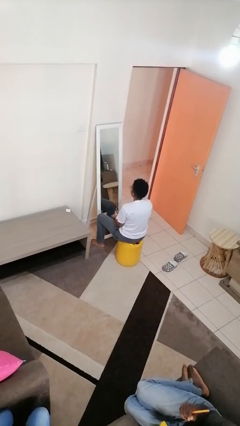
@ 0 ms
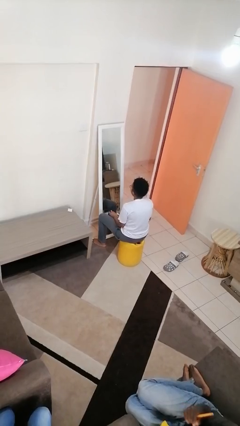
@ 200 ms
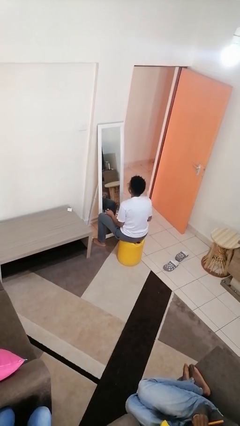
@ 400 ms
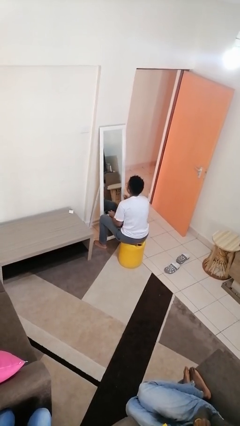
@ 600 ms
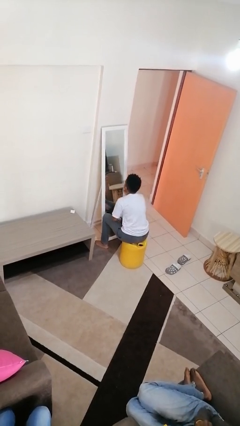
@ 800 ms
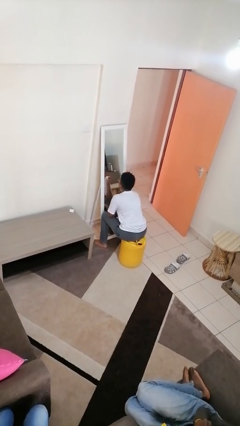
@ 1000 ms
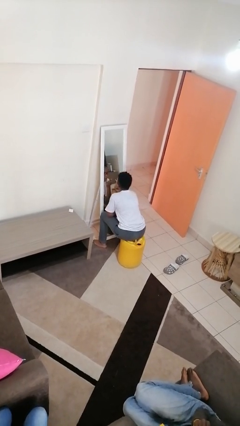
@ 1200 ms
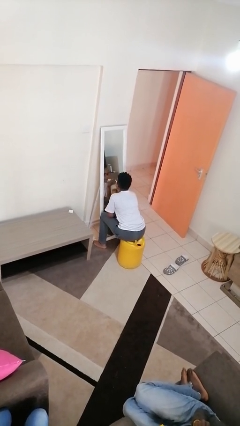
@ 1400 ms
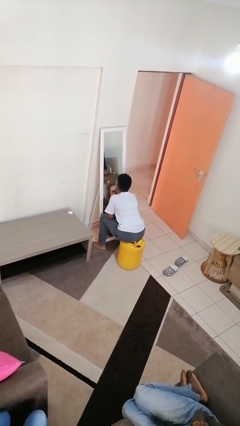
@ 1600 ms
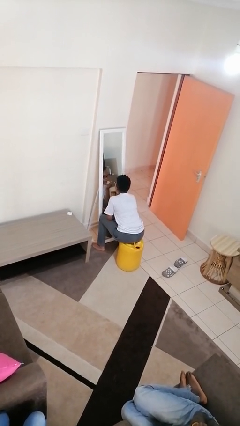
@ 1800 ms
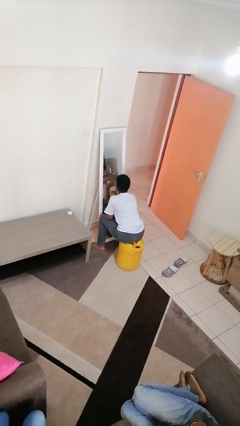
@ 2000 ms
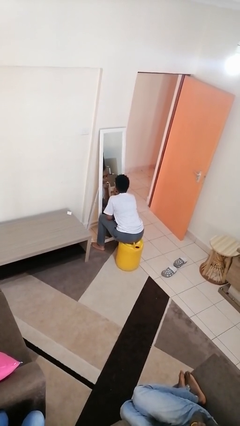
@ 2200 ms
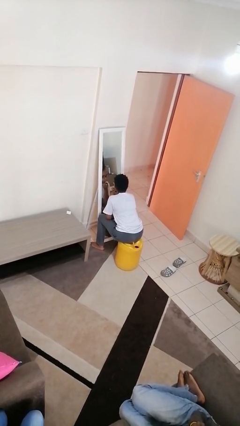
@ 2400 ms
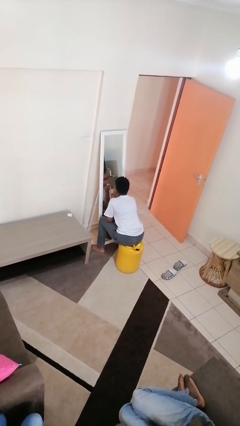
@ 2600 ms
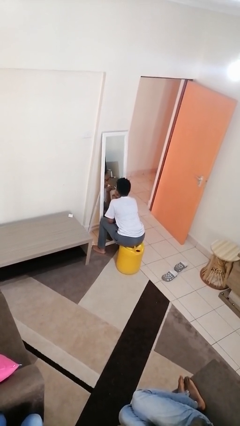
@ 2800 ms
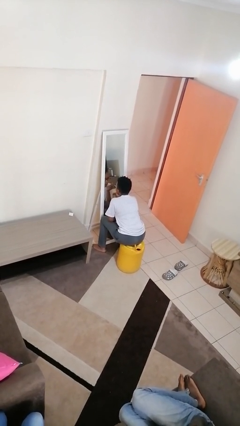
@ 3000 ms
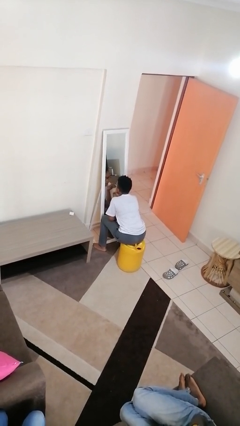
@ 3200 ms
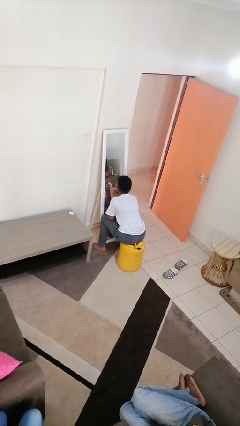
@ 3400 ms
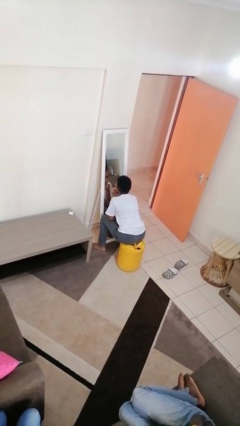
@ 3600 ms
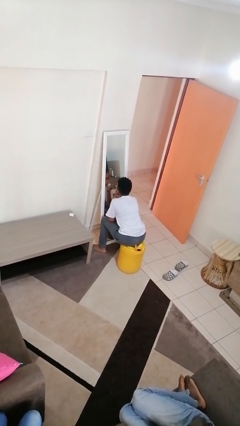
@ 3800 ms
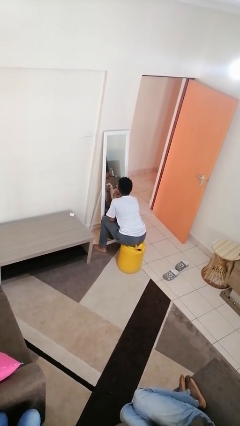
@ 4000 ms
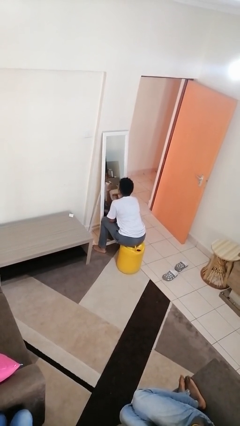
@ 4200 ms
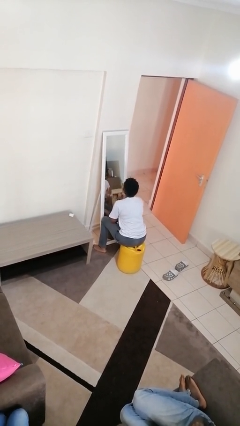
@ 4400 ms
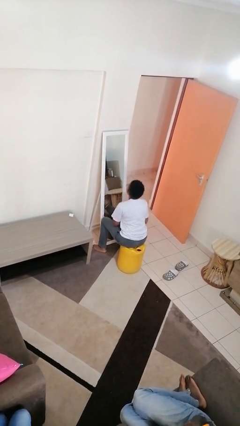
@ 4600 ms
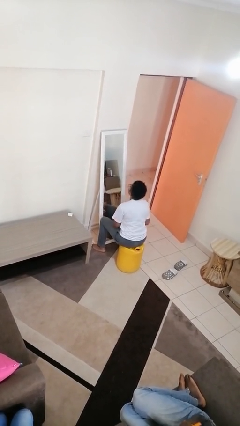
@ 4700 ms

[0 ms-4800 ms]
person applies lip makeup

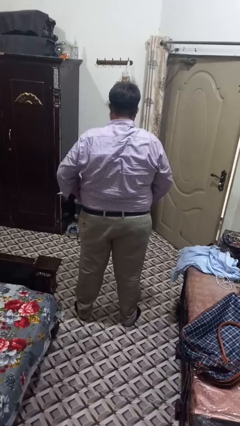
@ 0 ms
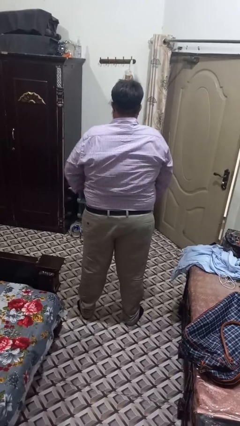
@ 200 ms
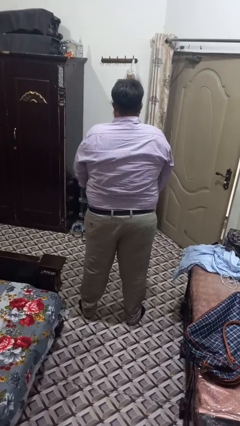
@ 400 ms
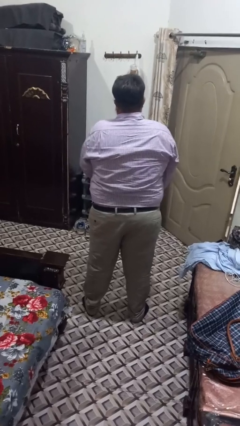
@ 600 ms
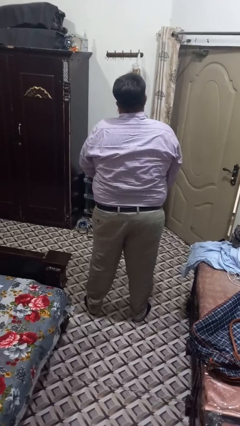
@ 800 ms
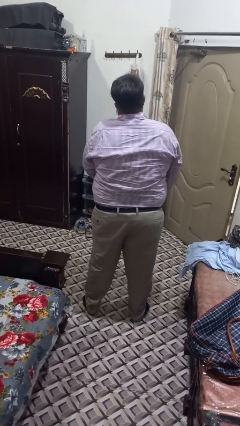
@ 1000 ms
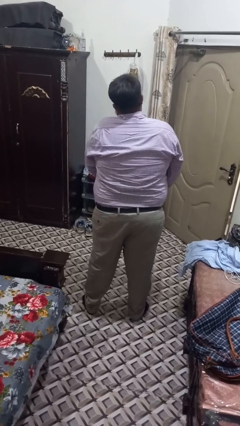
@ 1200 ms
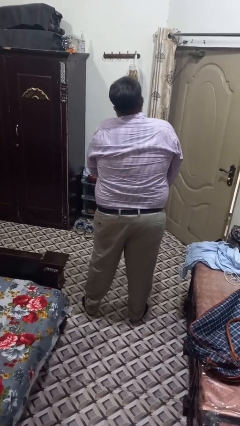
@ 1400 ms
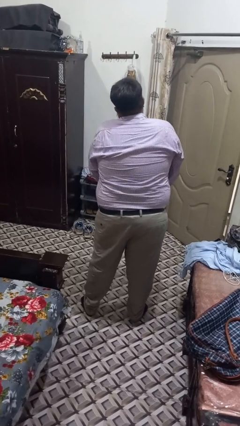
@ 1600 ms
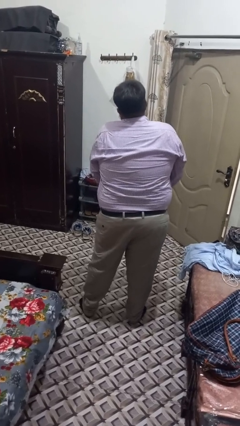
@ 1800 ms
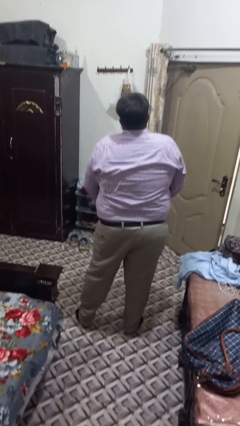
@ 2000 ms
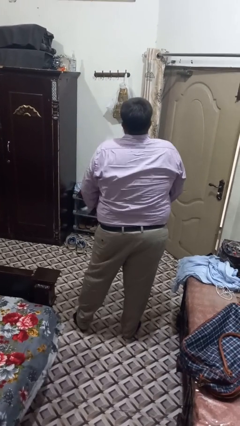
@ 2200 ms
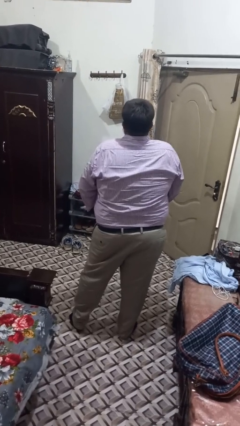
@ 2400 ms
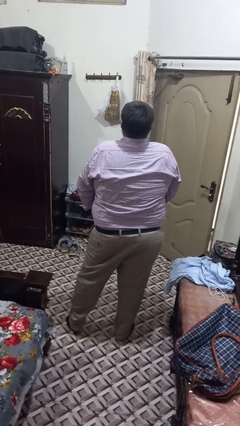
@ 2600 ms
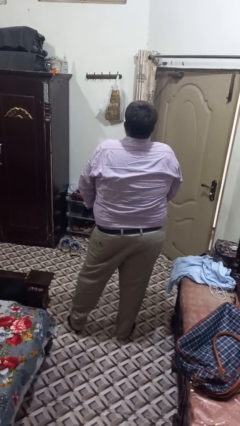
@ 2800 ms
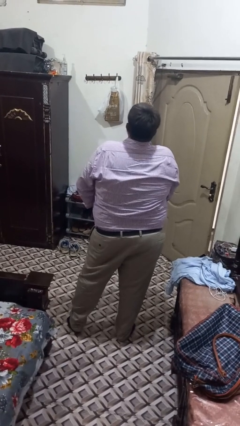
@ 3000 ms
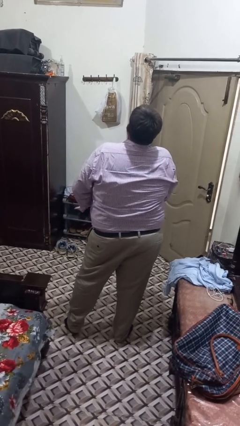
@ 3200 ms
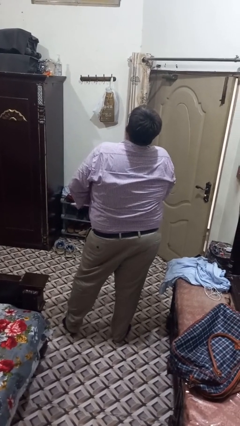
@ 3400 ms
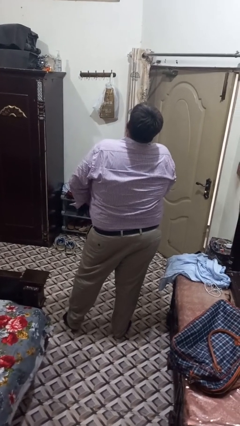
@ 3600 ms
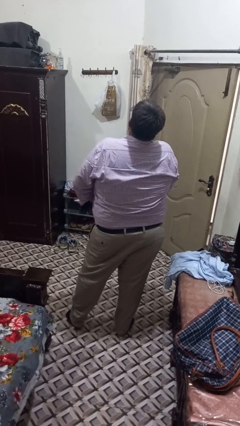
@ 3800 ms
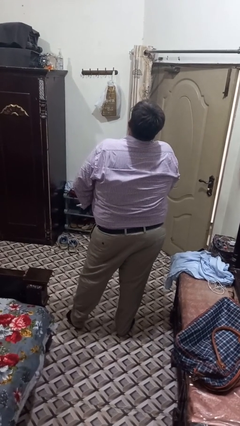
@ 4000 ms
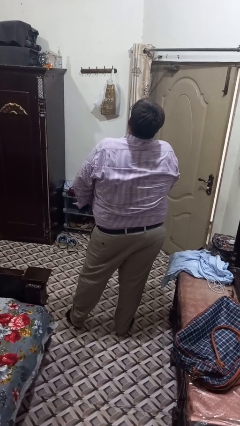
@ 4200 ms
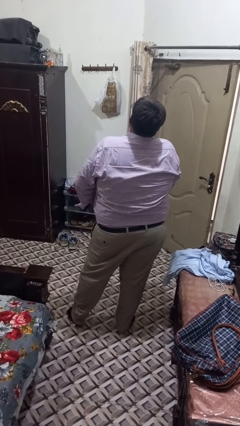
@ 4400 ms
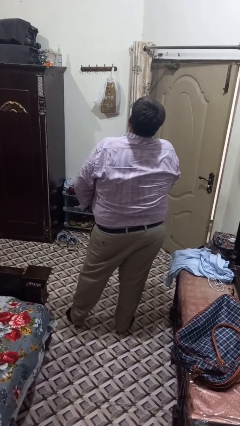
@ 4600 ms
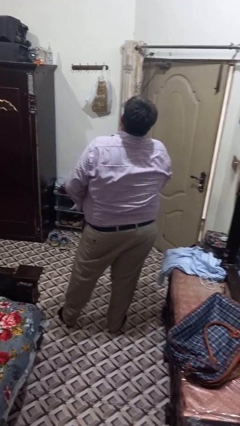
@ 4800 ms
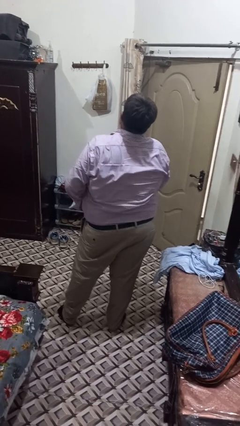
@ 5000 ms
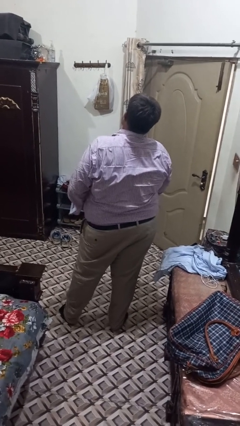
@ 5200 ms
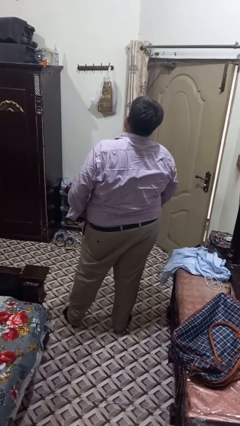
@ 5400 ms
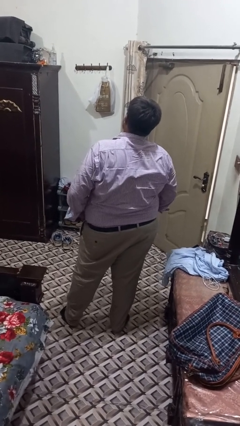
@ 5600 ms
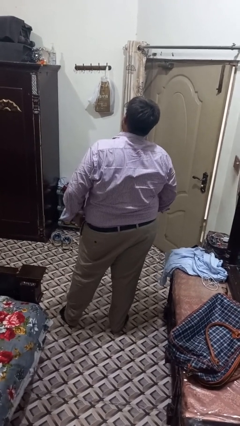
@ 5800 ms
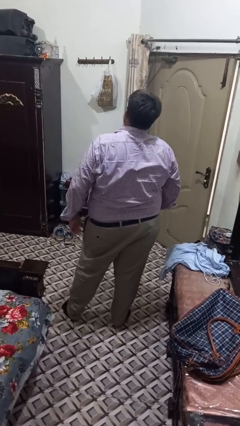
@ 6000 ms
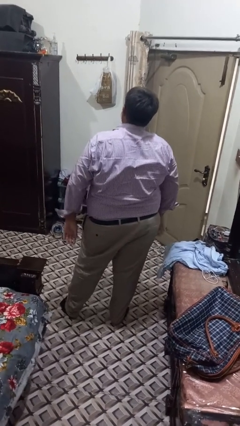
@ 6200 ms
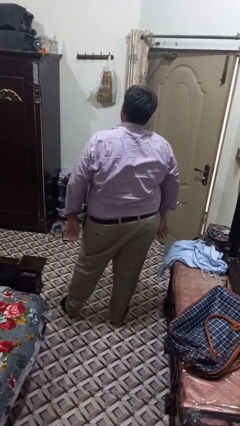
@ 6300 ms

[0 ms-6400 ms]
person tucks in shirt

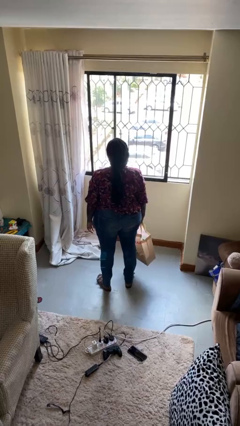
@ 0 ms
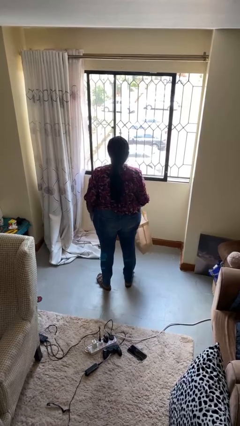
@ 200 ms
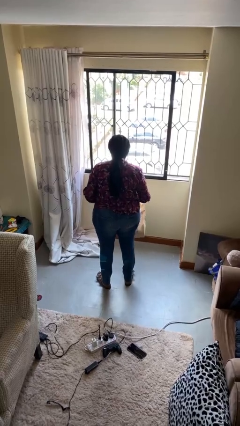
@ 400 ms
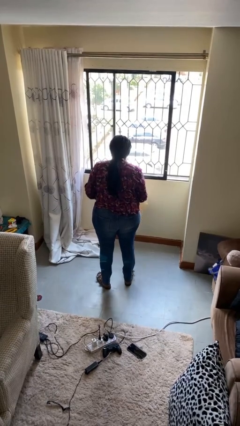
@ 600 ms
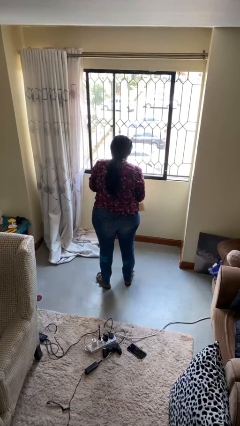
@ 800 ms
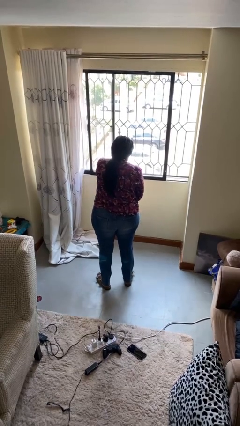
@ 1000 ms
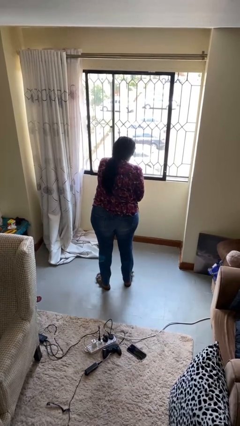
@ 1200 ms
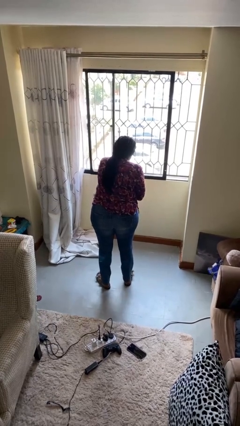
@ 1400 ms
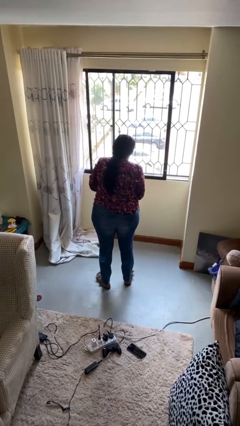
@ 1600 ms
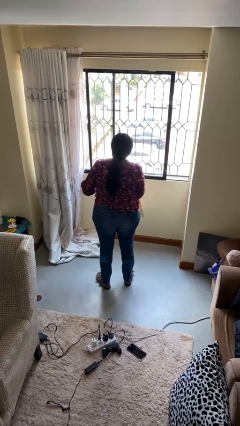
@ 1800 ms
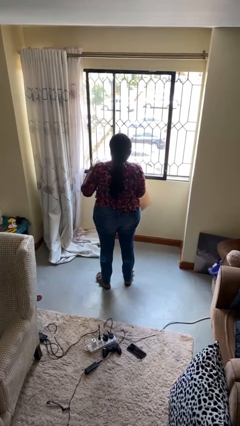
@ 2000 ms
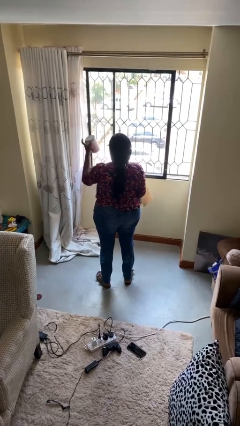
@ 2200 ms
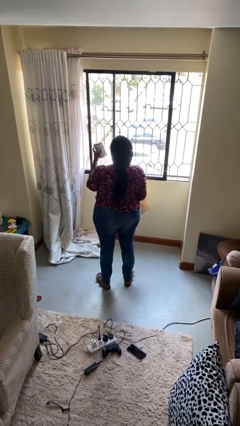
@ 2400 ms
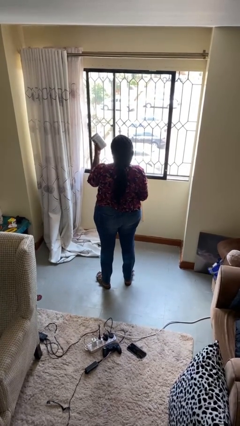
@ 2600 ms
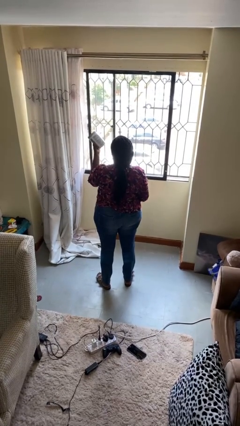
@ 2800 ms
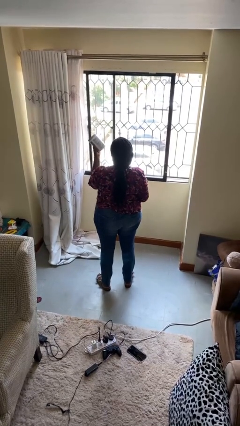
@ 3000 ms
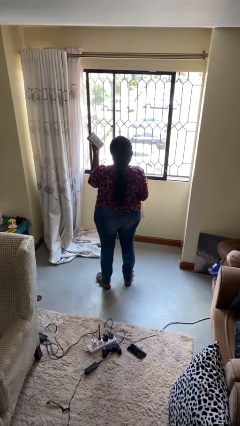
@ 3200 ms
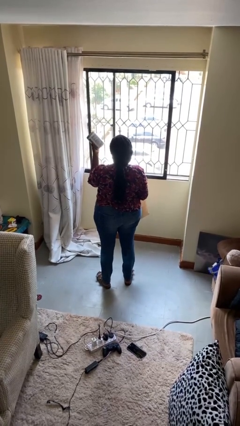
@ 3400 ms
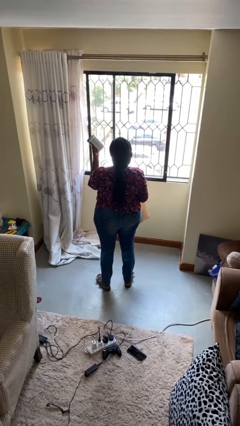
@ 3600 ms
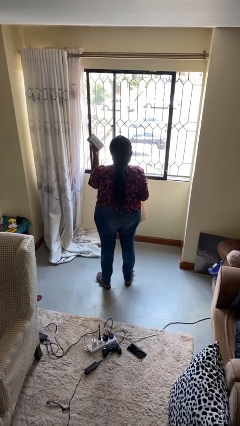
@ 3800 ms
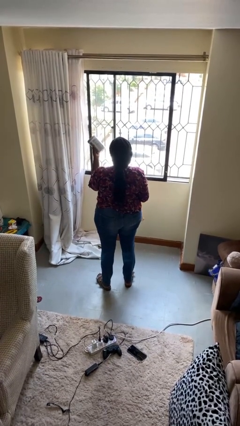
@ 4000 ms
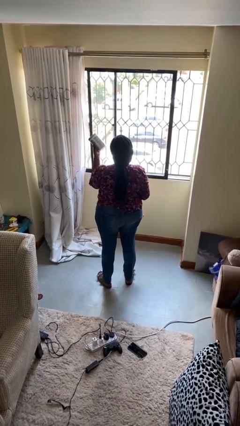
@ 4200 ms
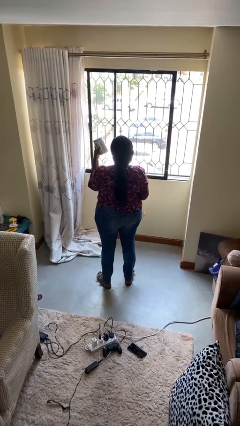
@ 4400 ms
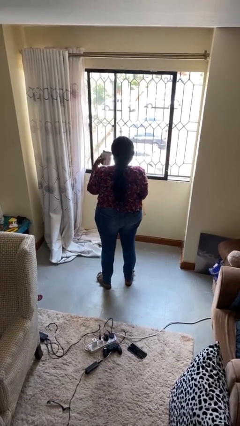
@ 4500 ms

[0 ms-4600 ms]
person takes object from bag

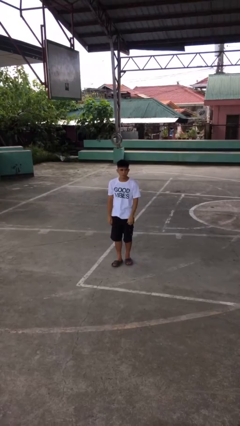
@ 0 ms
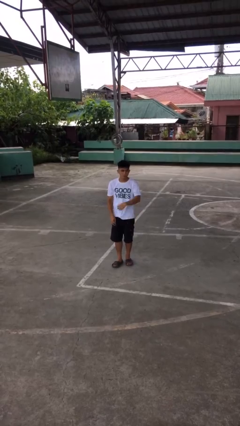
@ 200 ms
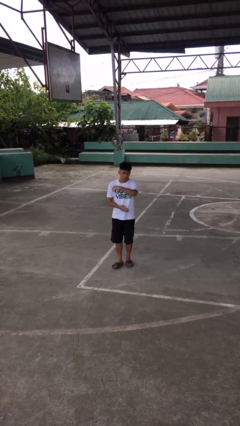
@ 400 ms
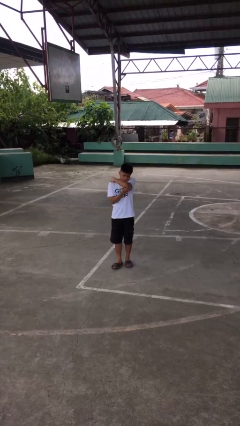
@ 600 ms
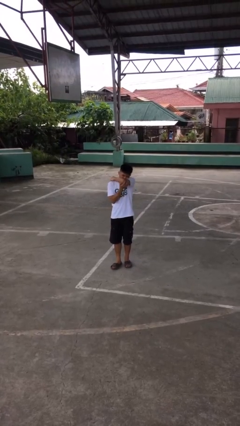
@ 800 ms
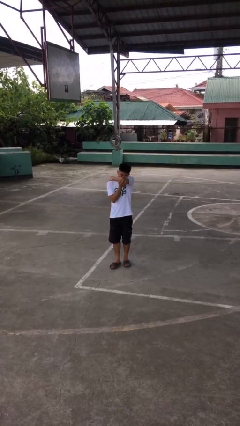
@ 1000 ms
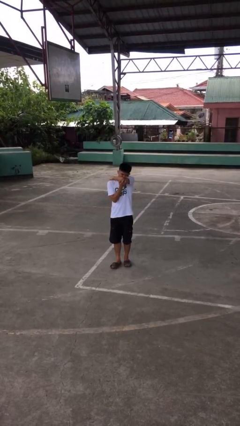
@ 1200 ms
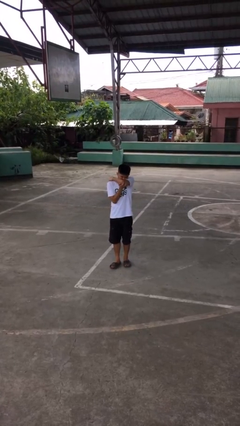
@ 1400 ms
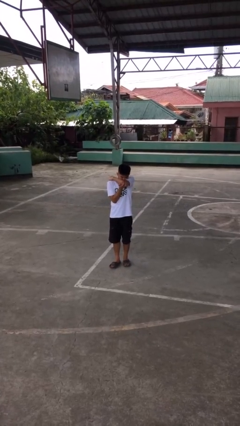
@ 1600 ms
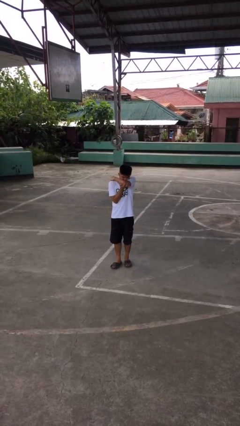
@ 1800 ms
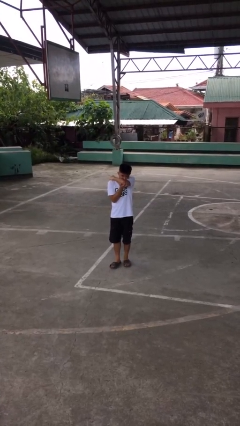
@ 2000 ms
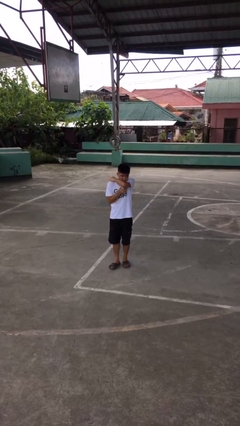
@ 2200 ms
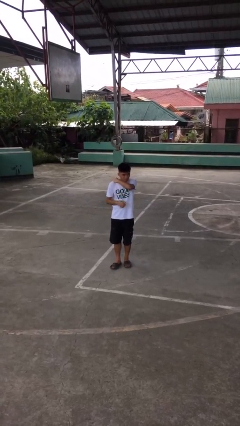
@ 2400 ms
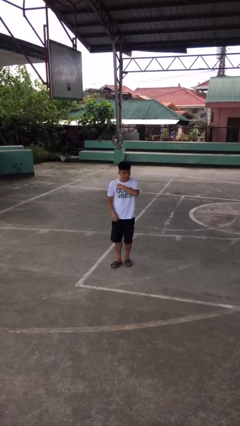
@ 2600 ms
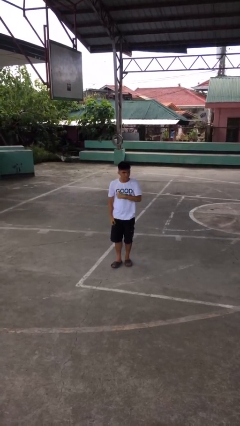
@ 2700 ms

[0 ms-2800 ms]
person sneezes into arm
